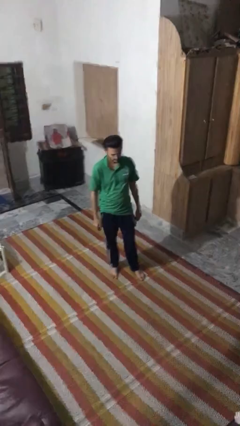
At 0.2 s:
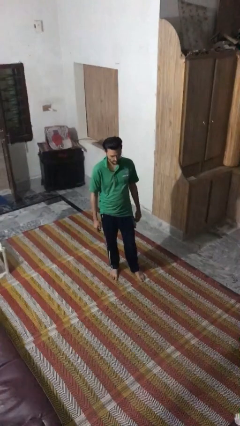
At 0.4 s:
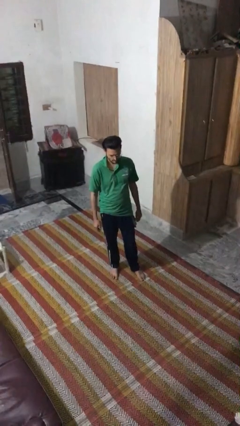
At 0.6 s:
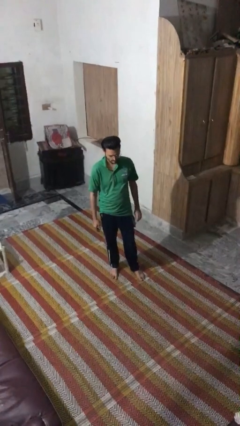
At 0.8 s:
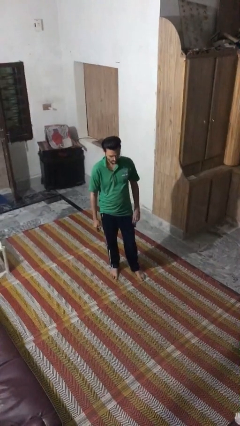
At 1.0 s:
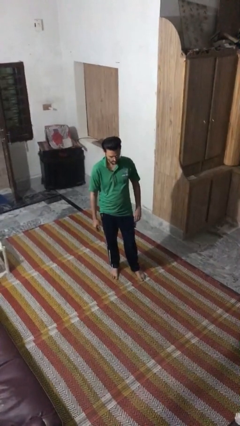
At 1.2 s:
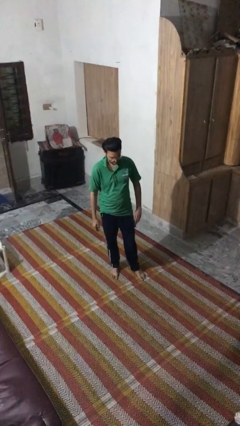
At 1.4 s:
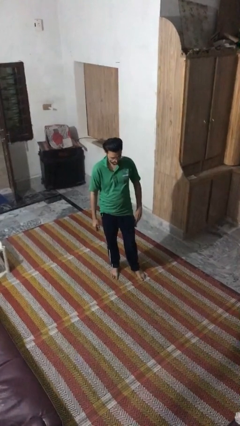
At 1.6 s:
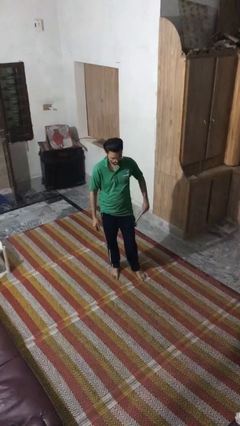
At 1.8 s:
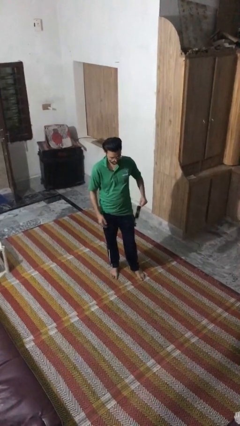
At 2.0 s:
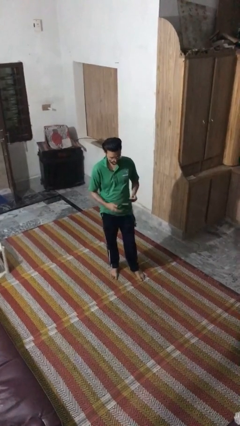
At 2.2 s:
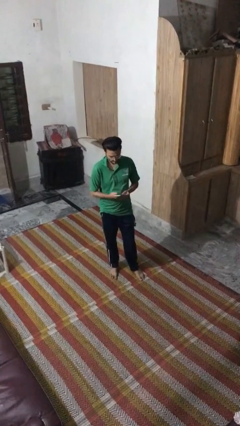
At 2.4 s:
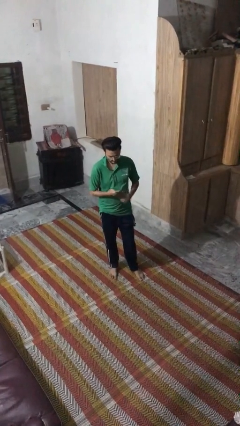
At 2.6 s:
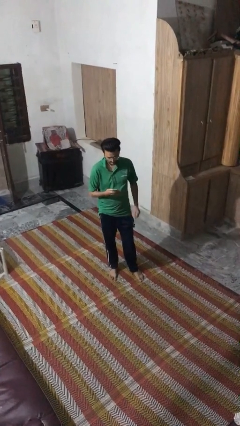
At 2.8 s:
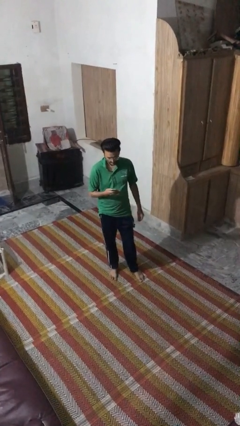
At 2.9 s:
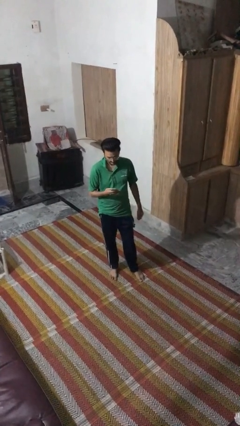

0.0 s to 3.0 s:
person takes phone from pocket

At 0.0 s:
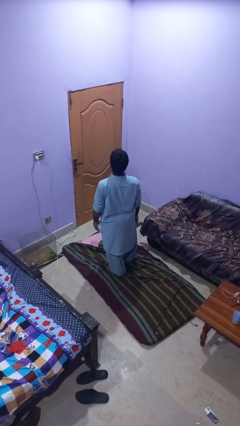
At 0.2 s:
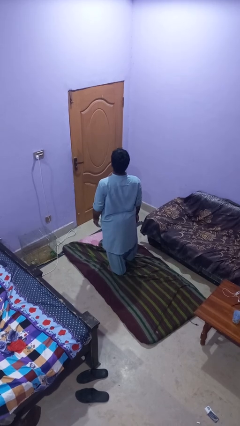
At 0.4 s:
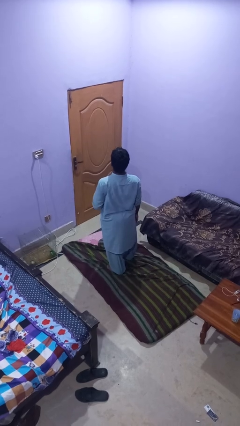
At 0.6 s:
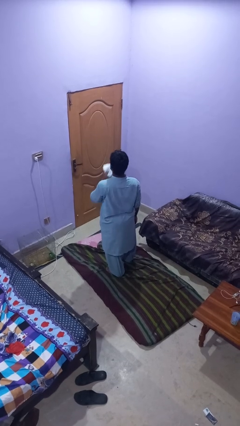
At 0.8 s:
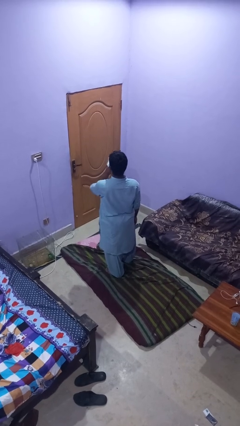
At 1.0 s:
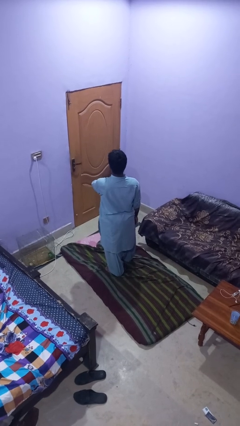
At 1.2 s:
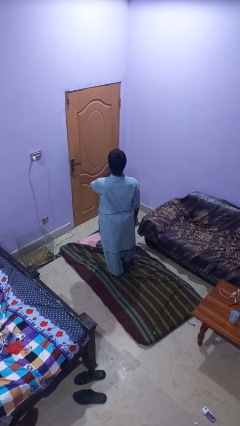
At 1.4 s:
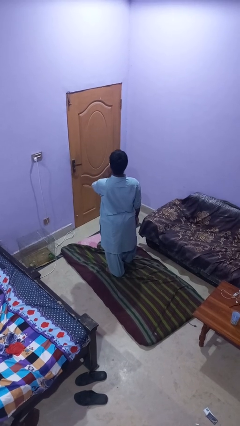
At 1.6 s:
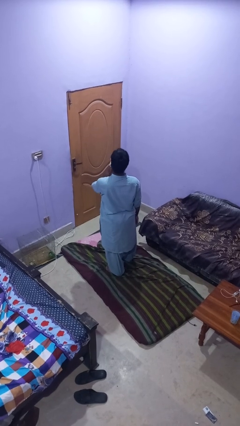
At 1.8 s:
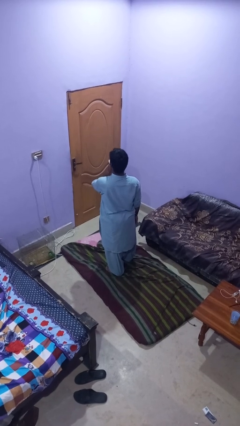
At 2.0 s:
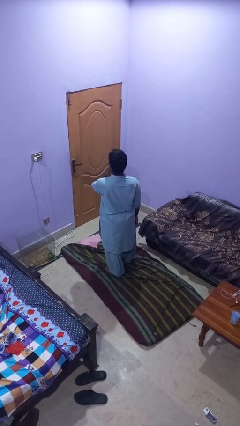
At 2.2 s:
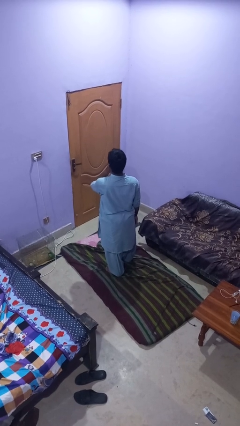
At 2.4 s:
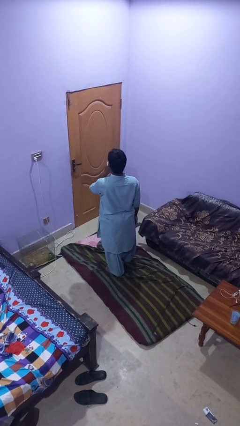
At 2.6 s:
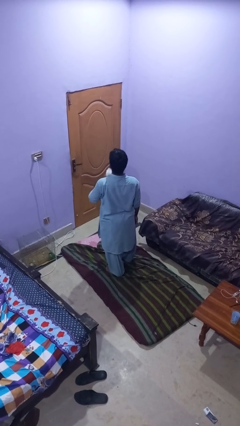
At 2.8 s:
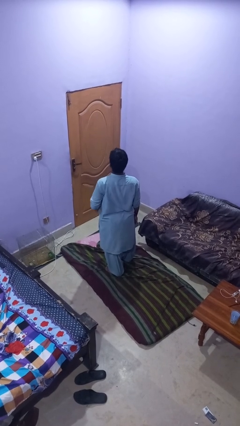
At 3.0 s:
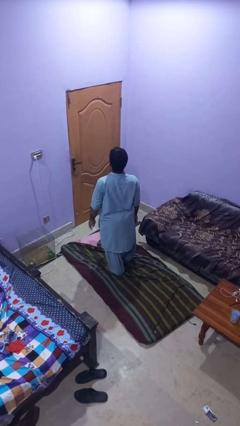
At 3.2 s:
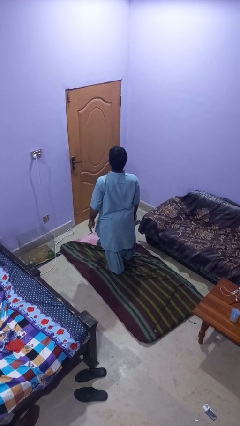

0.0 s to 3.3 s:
person wipes mouth with napkin

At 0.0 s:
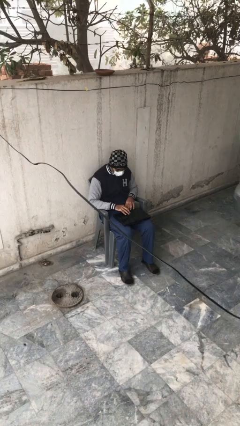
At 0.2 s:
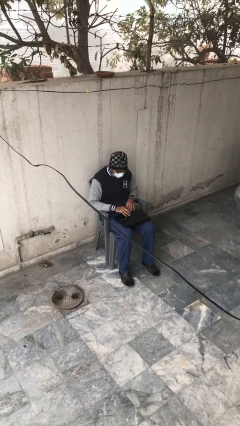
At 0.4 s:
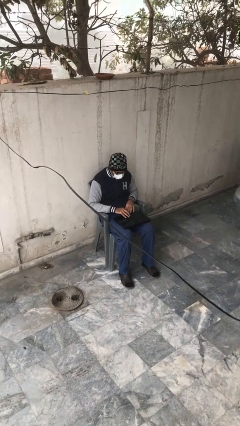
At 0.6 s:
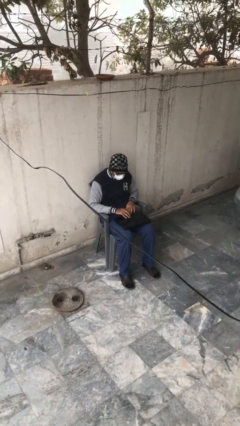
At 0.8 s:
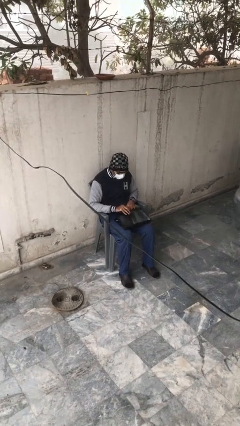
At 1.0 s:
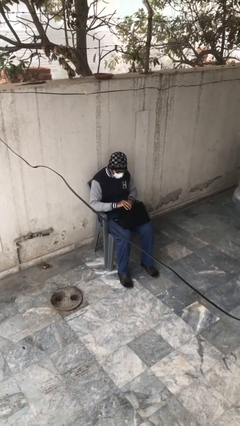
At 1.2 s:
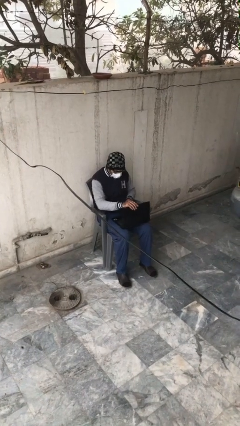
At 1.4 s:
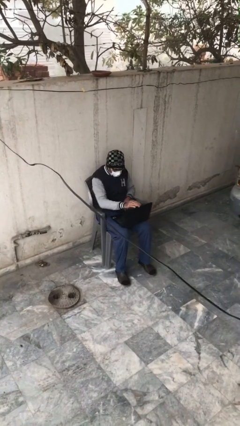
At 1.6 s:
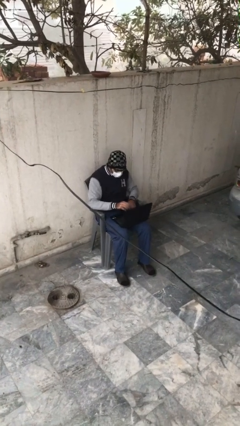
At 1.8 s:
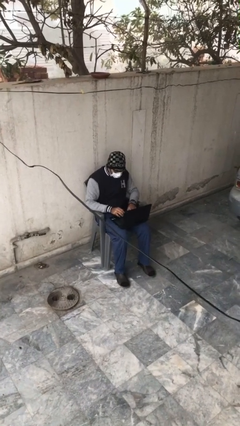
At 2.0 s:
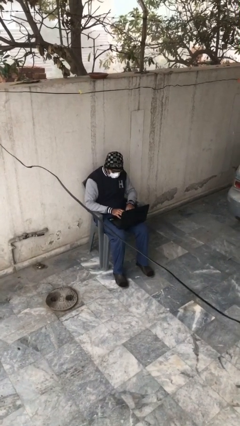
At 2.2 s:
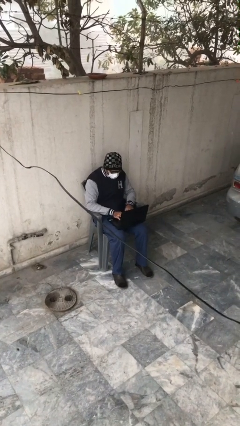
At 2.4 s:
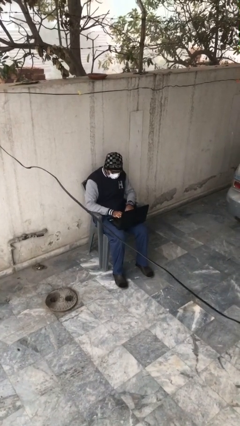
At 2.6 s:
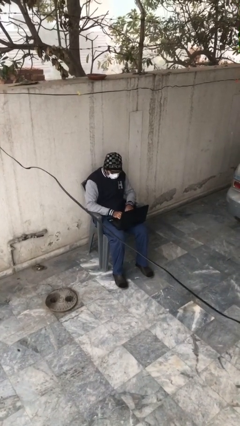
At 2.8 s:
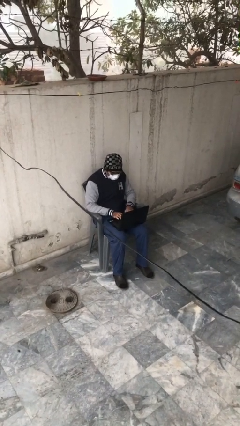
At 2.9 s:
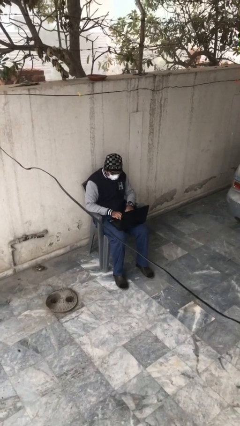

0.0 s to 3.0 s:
person interacts with laptop

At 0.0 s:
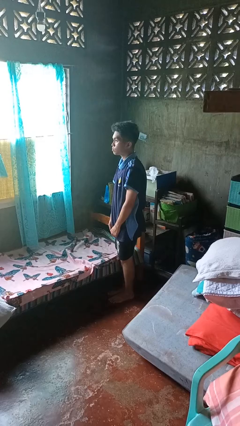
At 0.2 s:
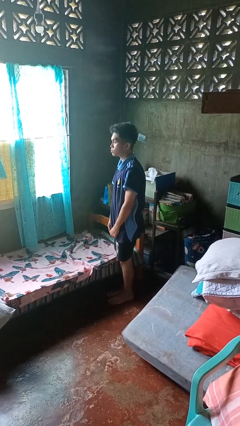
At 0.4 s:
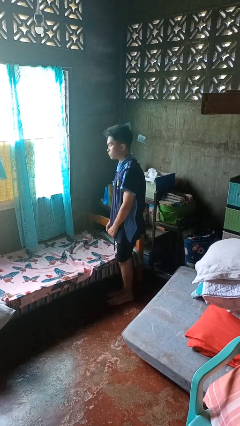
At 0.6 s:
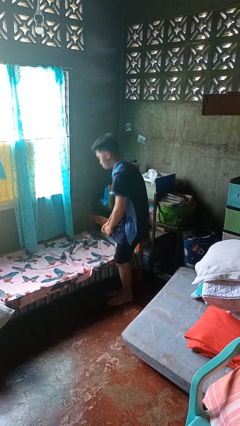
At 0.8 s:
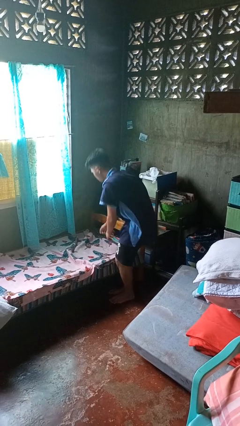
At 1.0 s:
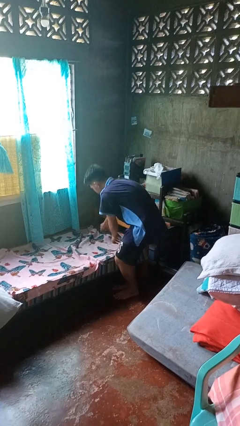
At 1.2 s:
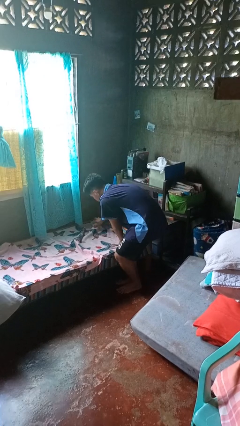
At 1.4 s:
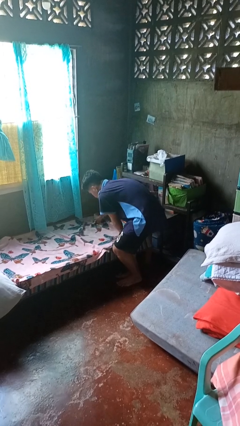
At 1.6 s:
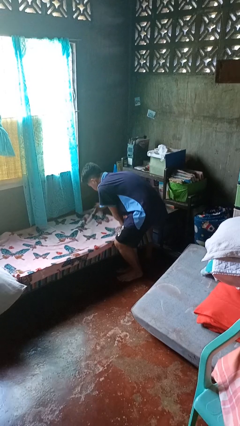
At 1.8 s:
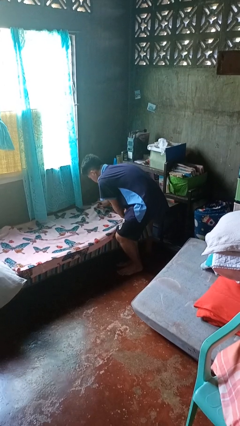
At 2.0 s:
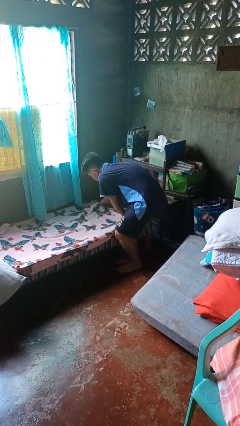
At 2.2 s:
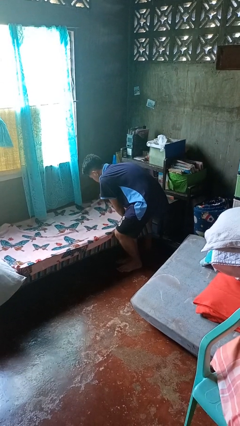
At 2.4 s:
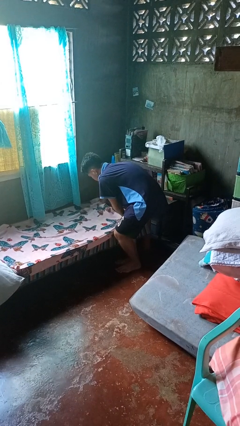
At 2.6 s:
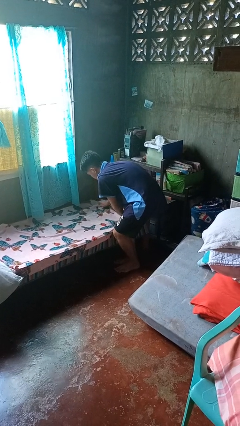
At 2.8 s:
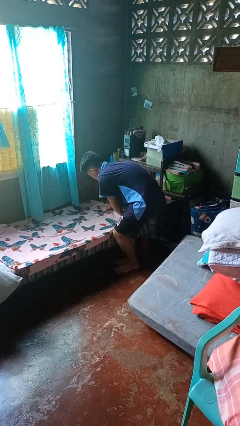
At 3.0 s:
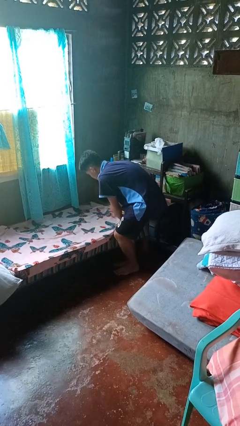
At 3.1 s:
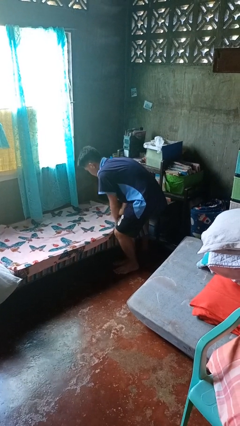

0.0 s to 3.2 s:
person makes bed

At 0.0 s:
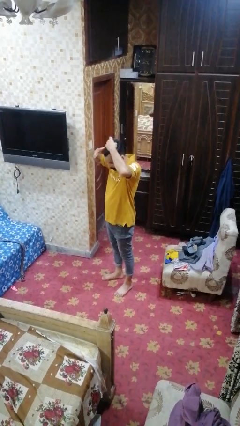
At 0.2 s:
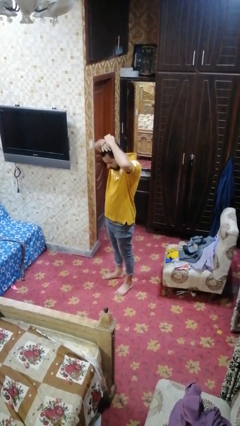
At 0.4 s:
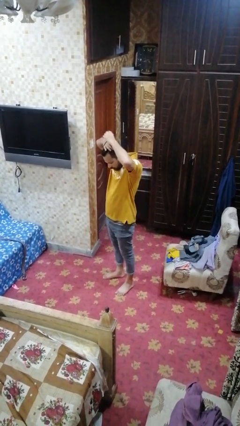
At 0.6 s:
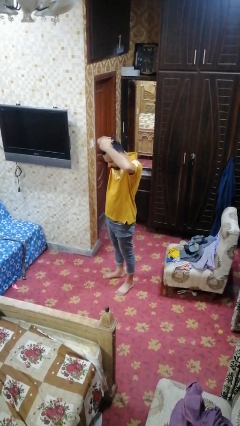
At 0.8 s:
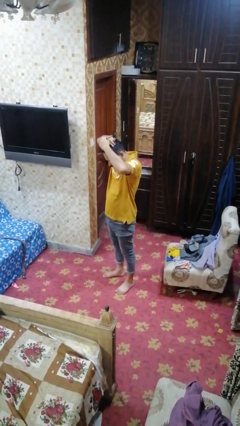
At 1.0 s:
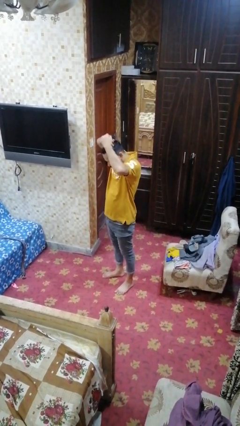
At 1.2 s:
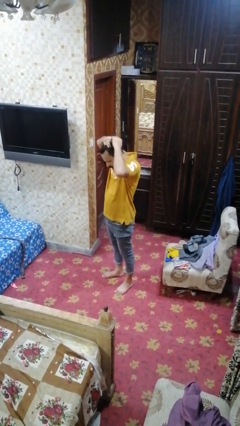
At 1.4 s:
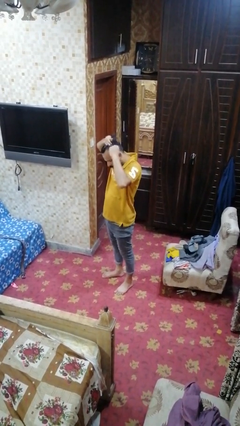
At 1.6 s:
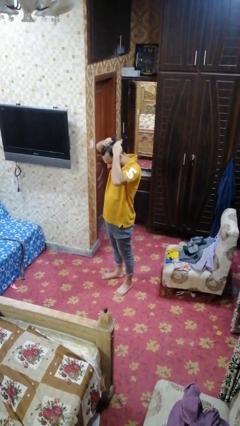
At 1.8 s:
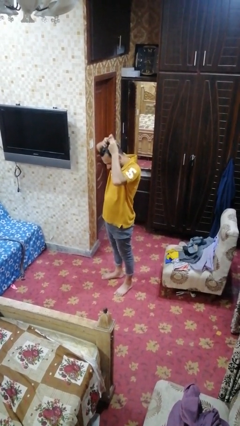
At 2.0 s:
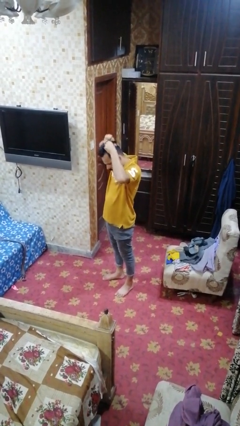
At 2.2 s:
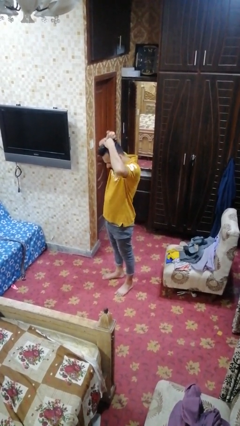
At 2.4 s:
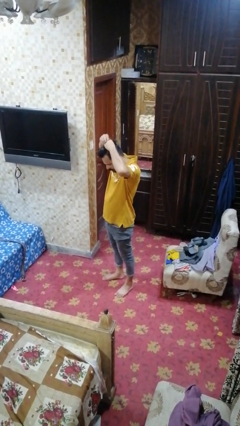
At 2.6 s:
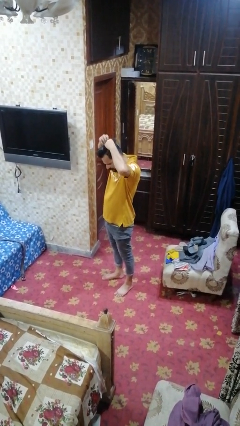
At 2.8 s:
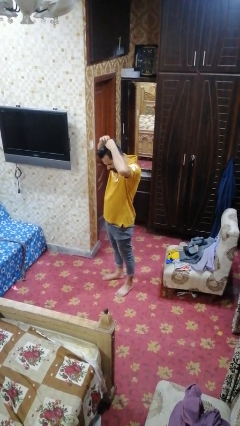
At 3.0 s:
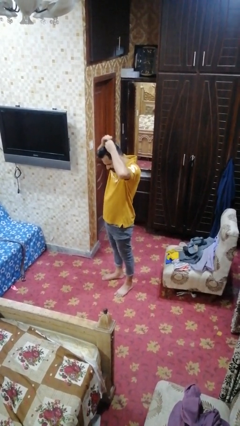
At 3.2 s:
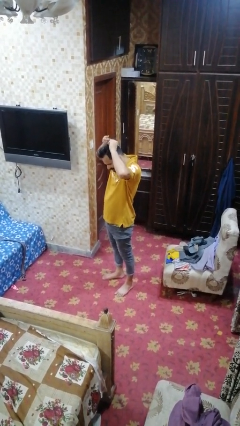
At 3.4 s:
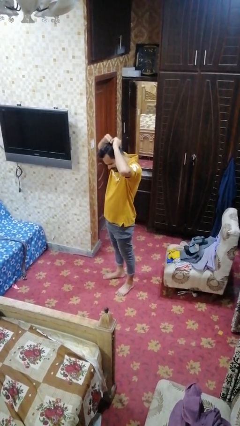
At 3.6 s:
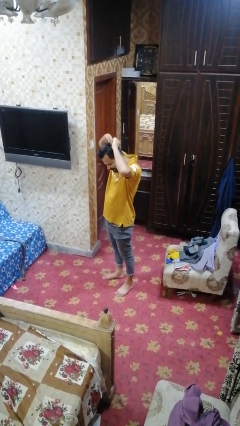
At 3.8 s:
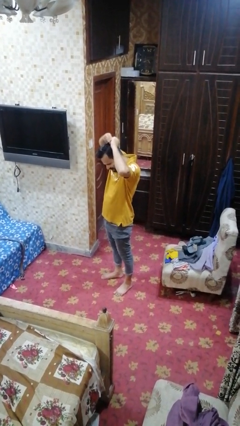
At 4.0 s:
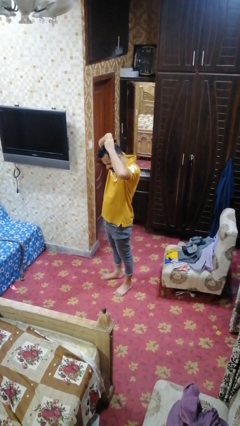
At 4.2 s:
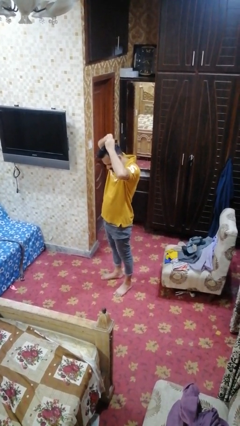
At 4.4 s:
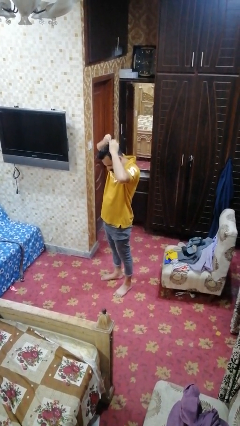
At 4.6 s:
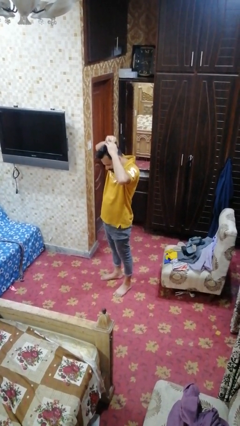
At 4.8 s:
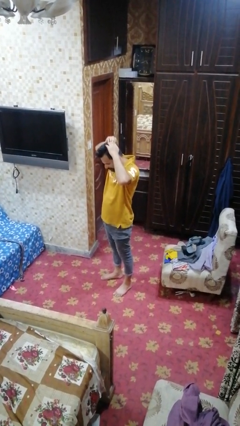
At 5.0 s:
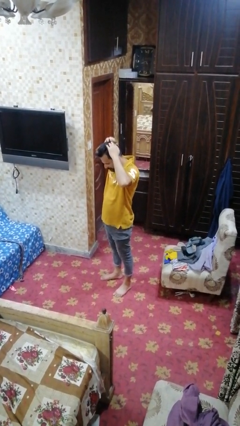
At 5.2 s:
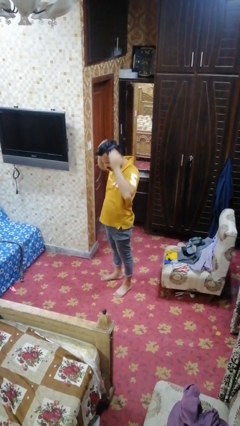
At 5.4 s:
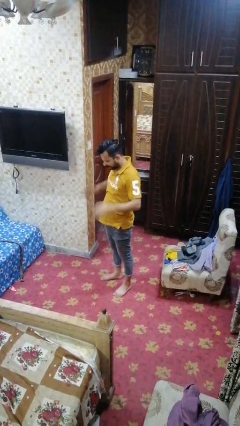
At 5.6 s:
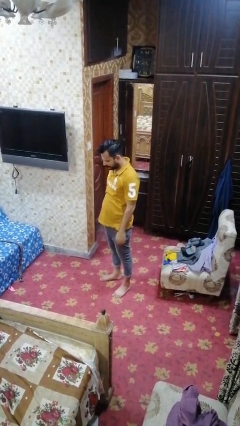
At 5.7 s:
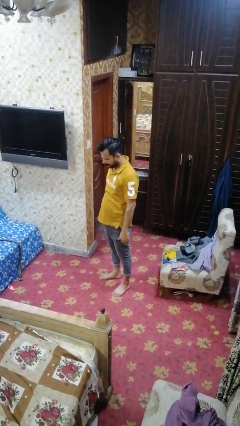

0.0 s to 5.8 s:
person takes off hairtie
